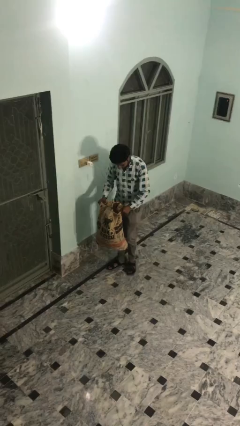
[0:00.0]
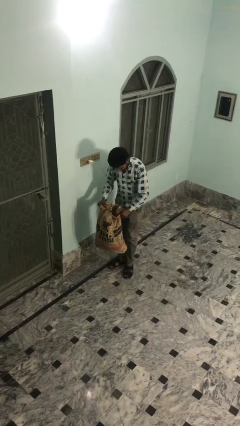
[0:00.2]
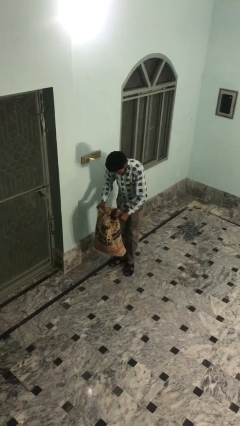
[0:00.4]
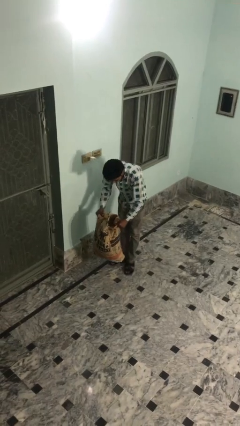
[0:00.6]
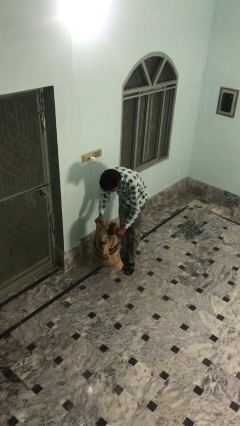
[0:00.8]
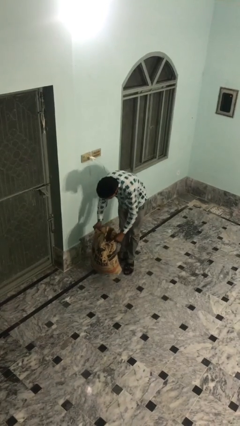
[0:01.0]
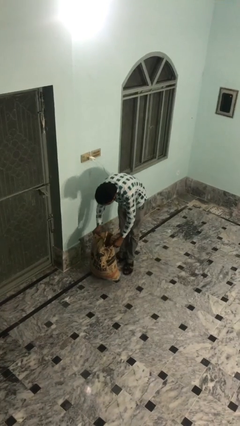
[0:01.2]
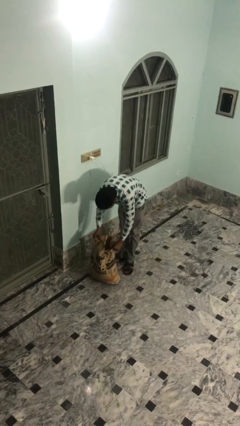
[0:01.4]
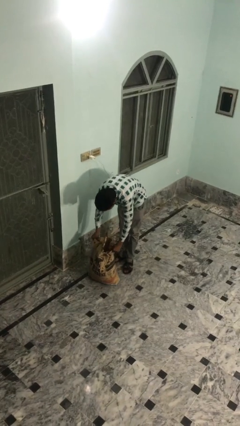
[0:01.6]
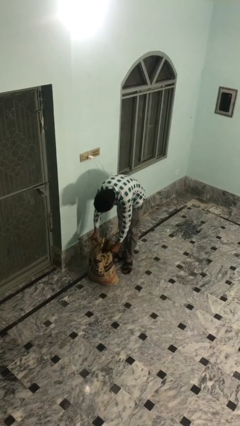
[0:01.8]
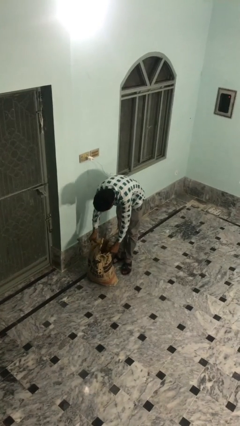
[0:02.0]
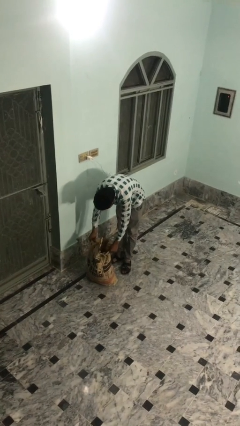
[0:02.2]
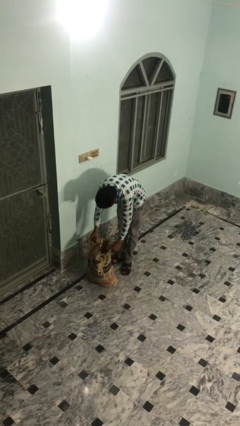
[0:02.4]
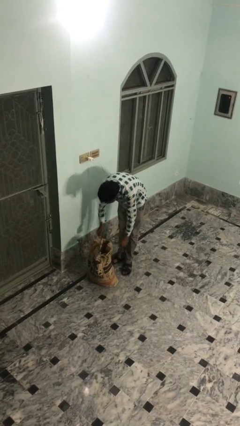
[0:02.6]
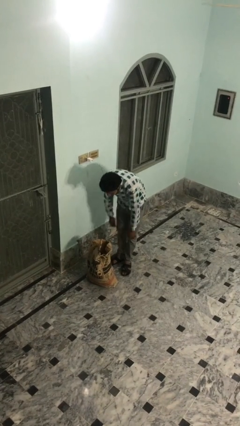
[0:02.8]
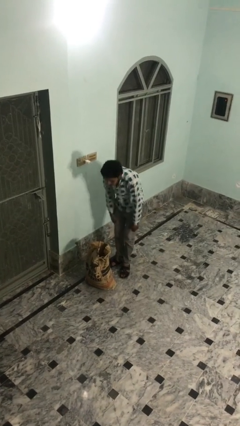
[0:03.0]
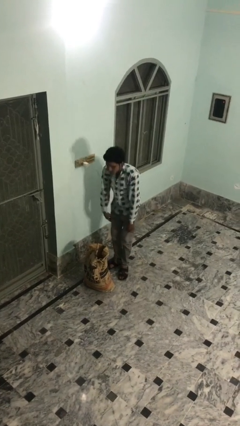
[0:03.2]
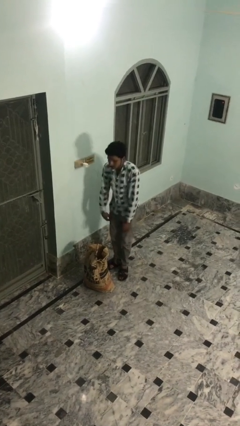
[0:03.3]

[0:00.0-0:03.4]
person puts down object on floor

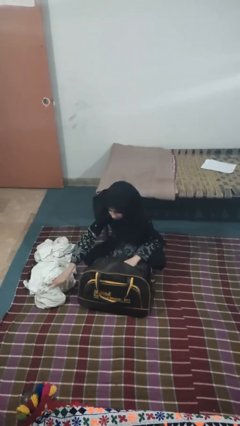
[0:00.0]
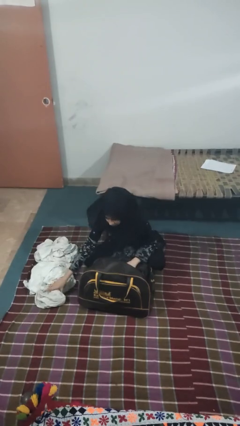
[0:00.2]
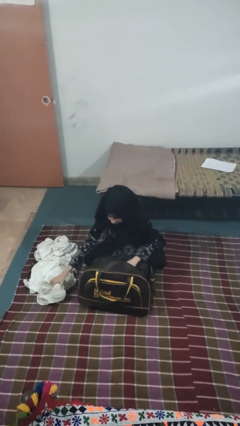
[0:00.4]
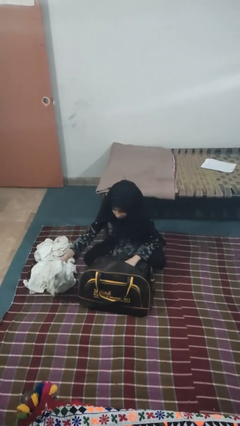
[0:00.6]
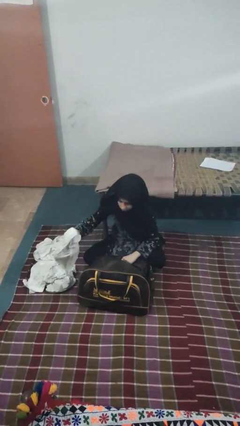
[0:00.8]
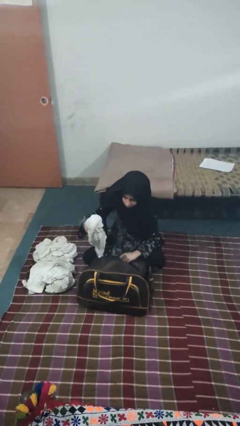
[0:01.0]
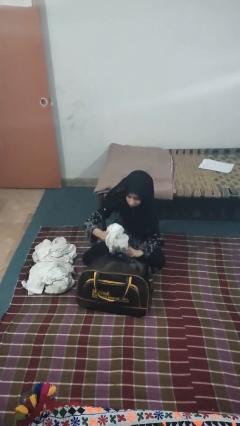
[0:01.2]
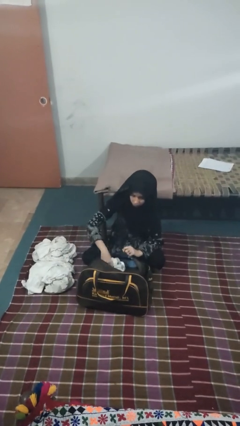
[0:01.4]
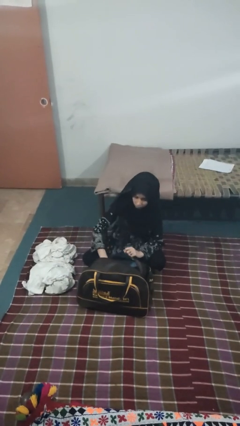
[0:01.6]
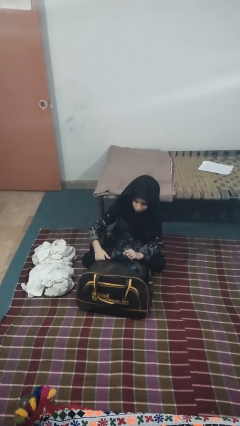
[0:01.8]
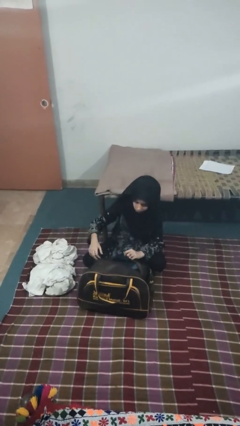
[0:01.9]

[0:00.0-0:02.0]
person loads clothes into suitcase

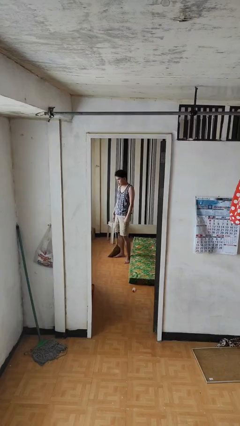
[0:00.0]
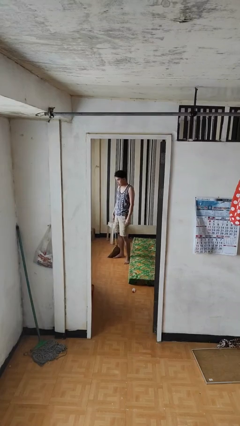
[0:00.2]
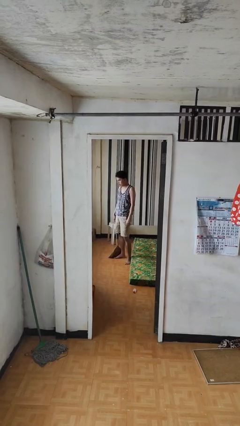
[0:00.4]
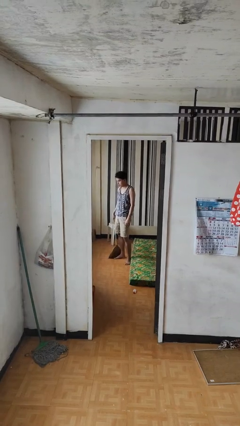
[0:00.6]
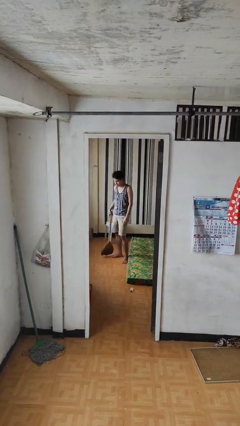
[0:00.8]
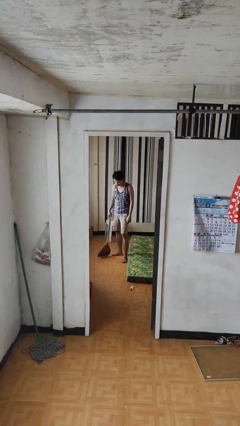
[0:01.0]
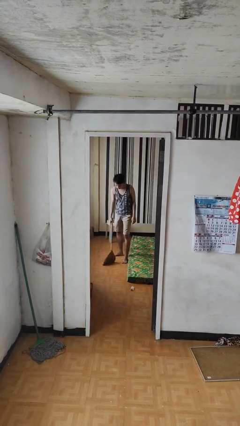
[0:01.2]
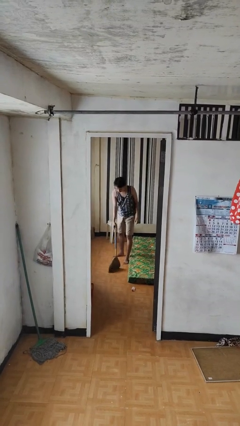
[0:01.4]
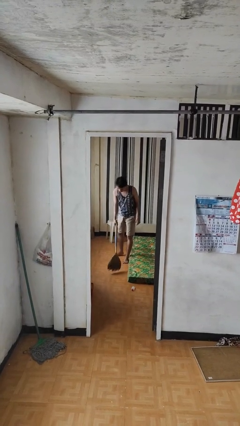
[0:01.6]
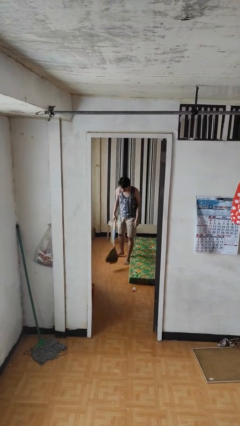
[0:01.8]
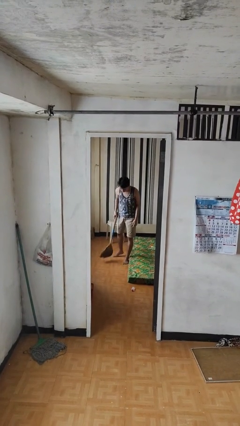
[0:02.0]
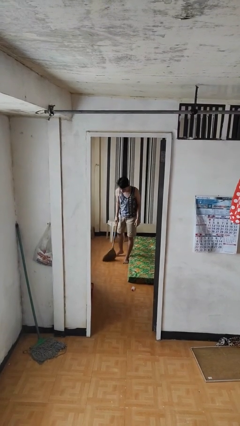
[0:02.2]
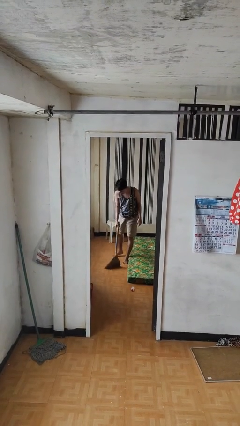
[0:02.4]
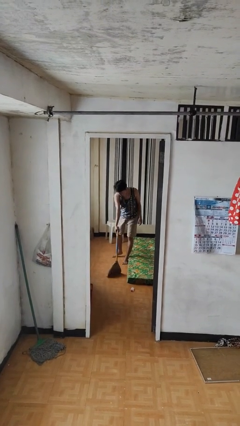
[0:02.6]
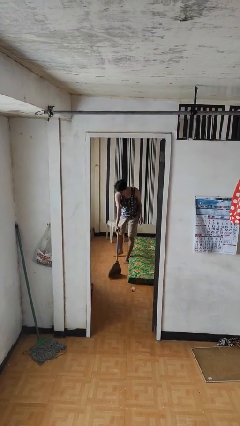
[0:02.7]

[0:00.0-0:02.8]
person sweeps floor

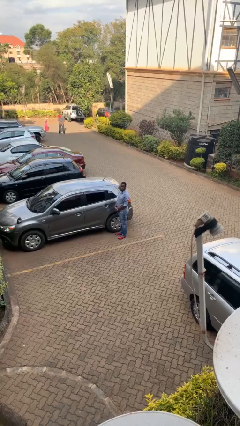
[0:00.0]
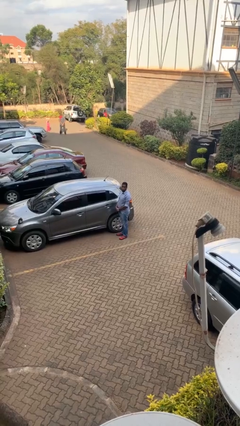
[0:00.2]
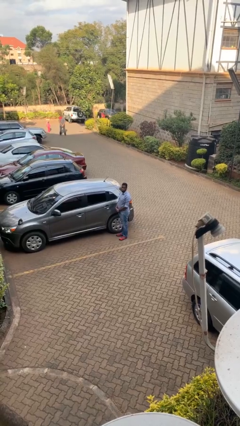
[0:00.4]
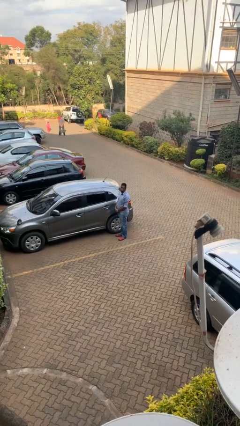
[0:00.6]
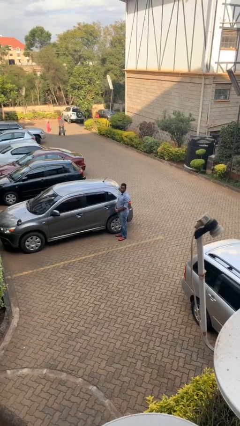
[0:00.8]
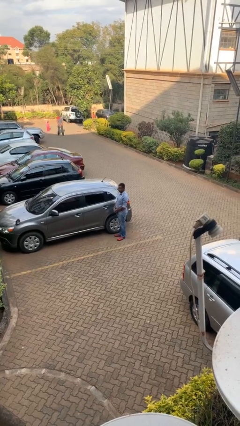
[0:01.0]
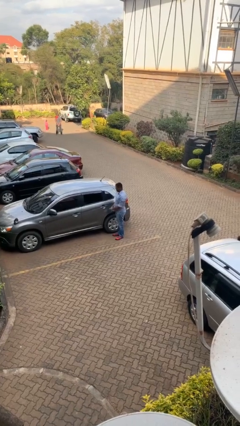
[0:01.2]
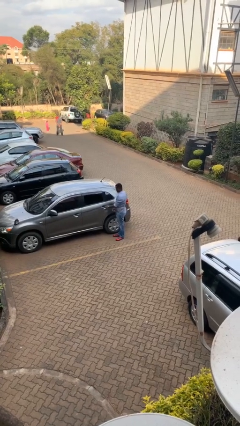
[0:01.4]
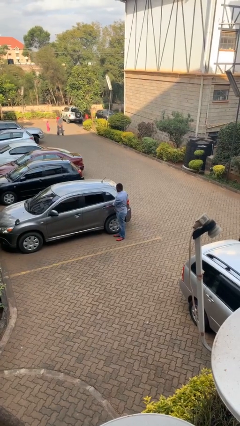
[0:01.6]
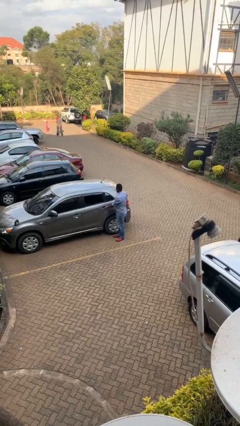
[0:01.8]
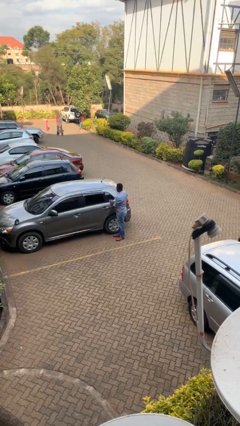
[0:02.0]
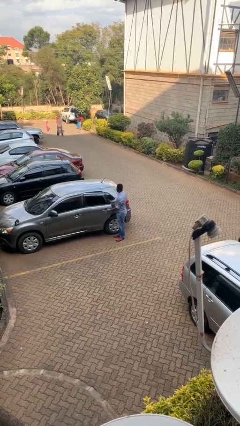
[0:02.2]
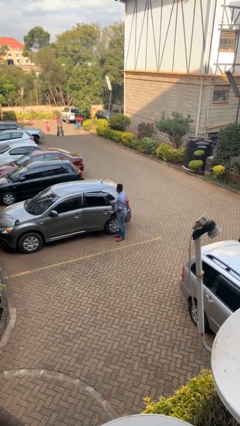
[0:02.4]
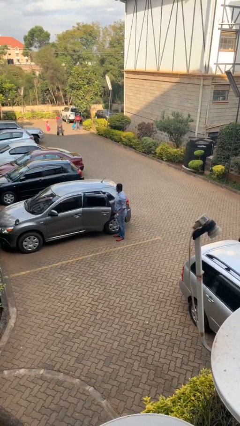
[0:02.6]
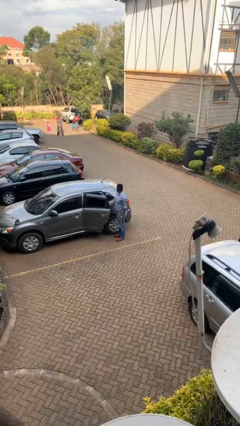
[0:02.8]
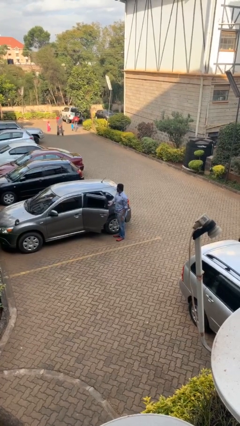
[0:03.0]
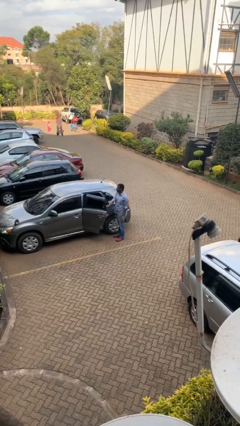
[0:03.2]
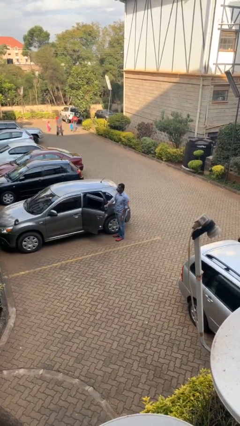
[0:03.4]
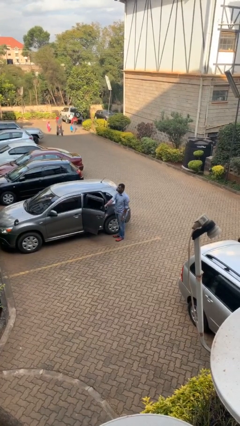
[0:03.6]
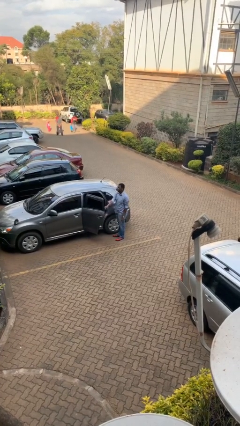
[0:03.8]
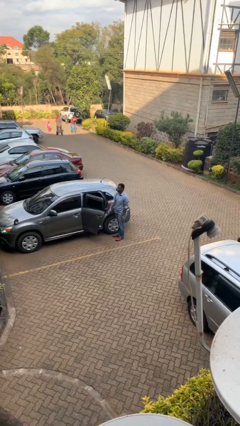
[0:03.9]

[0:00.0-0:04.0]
person opens car door

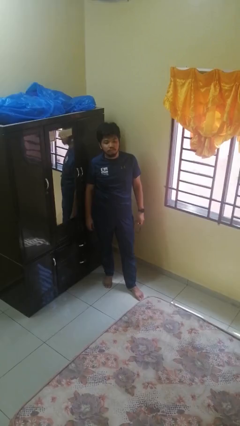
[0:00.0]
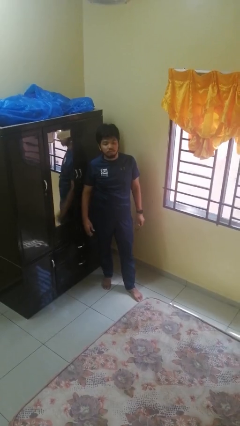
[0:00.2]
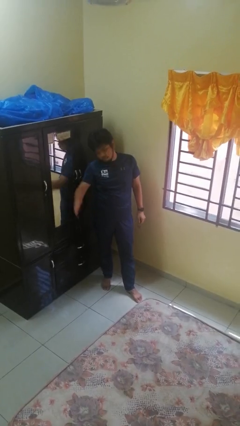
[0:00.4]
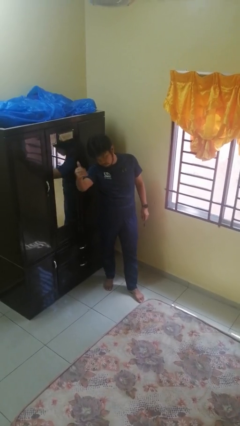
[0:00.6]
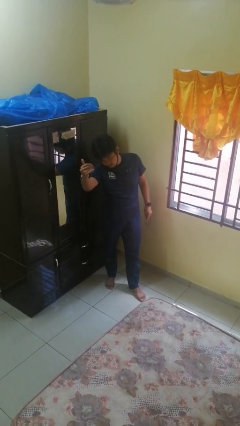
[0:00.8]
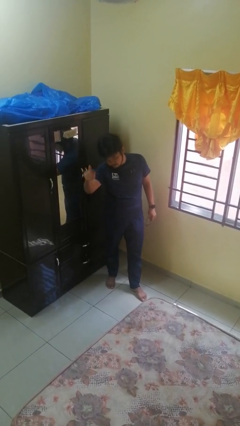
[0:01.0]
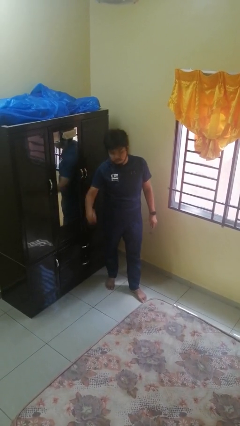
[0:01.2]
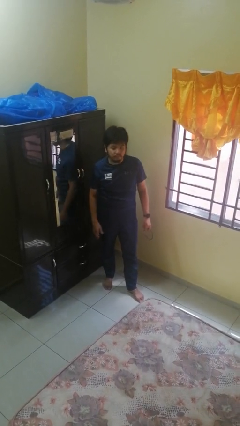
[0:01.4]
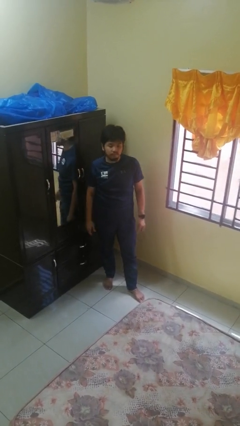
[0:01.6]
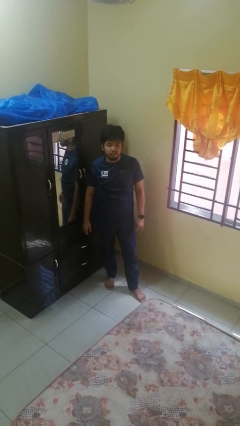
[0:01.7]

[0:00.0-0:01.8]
person gestures come here

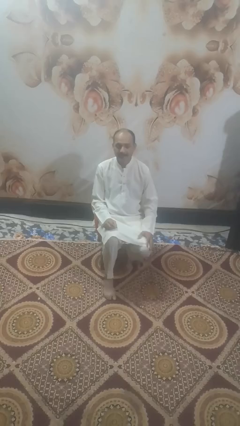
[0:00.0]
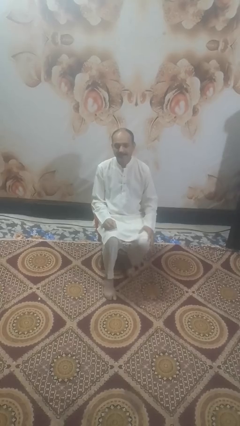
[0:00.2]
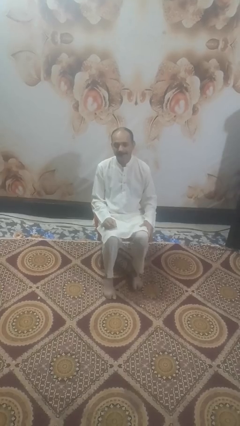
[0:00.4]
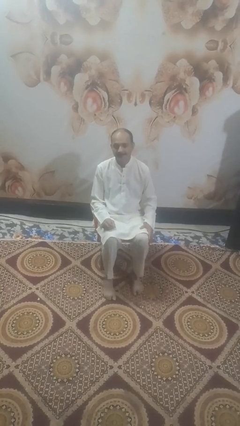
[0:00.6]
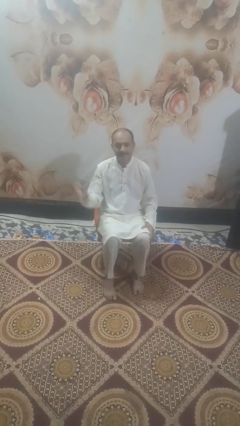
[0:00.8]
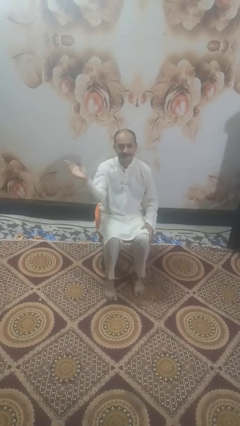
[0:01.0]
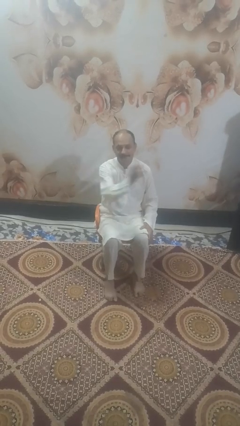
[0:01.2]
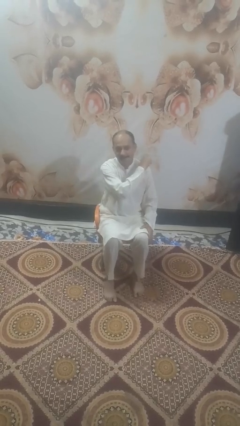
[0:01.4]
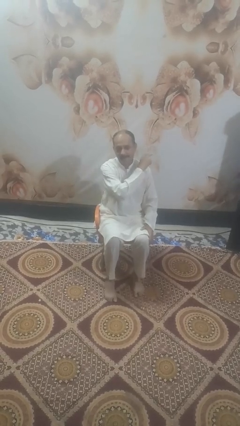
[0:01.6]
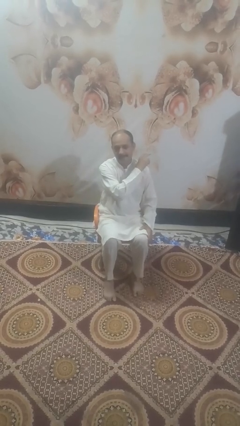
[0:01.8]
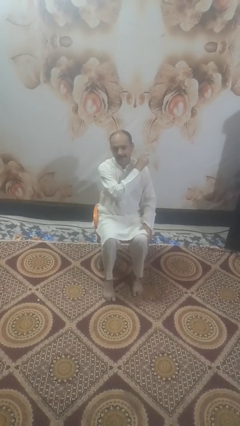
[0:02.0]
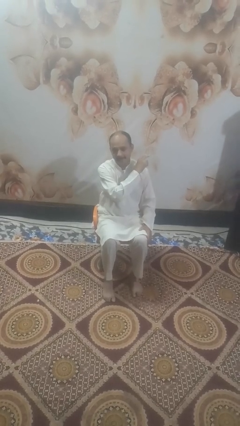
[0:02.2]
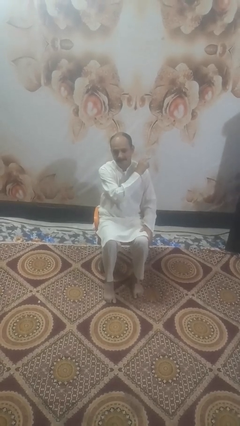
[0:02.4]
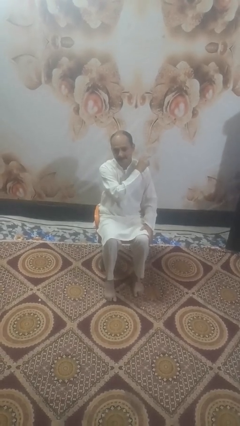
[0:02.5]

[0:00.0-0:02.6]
person gestures swipe left

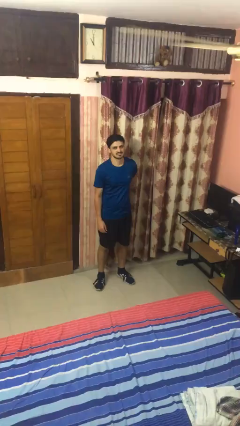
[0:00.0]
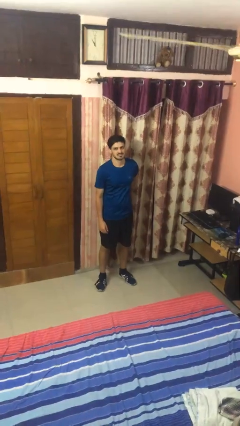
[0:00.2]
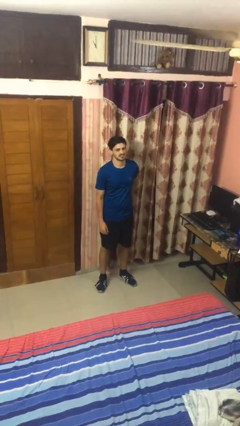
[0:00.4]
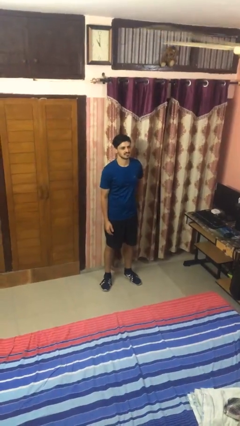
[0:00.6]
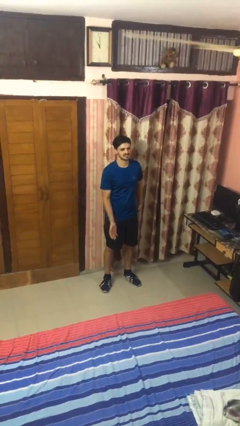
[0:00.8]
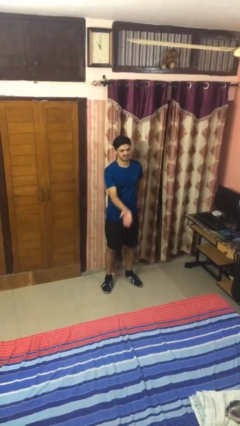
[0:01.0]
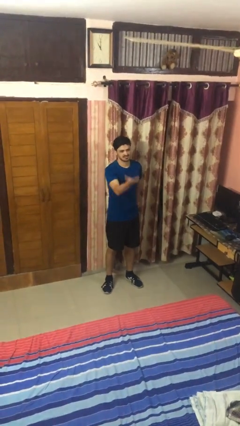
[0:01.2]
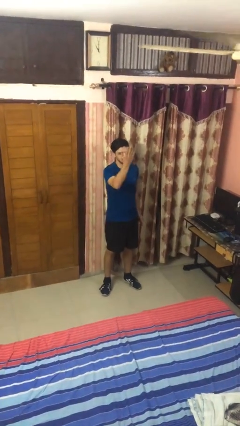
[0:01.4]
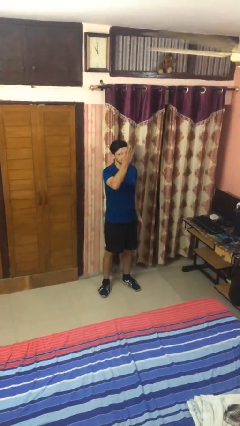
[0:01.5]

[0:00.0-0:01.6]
person gestures swipe up
